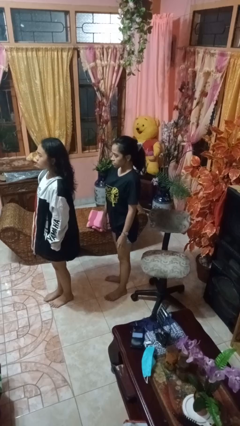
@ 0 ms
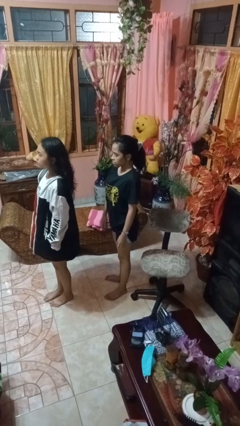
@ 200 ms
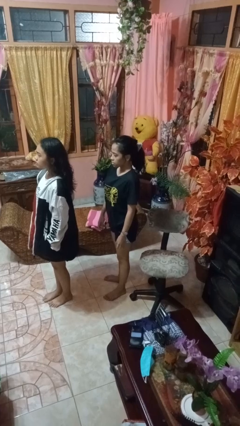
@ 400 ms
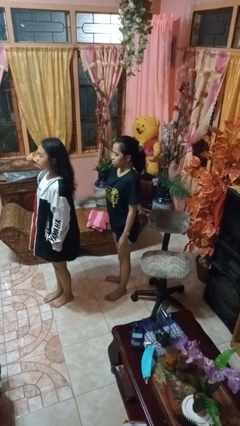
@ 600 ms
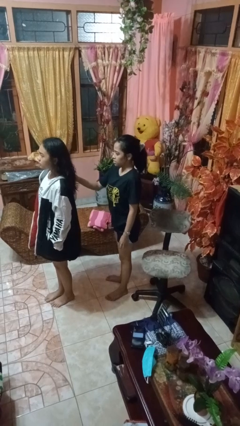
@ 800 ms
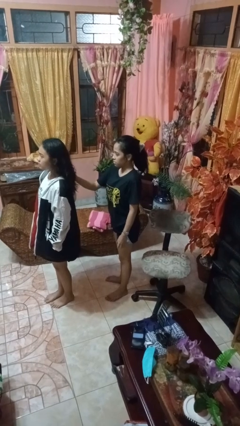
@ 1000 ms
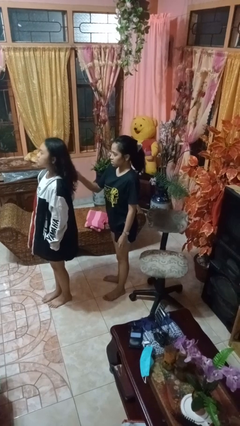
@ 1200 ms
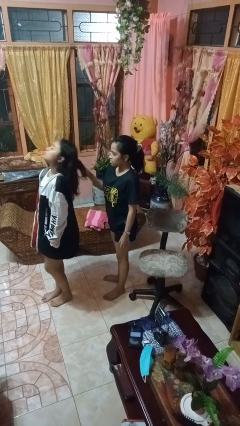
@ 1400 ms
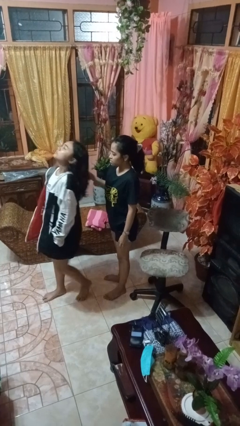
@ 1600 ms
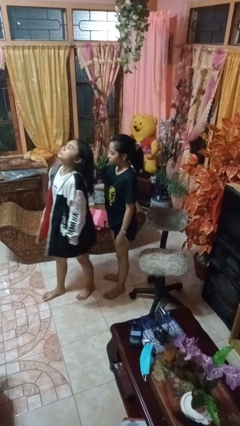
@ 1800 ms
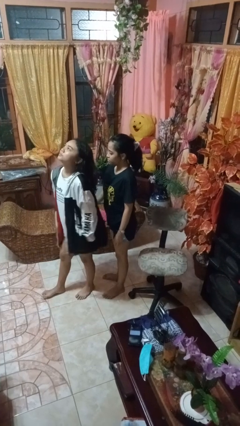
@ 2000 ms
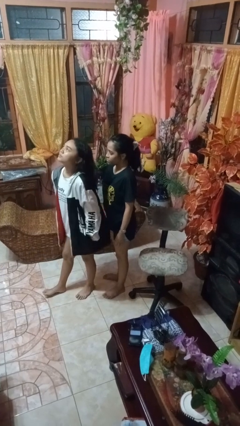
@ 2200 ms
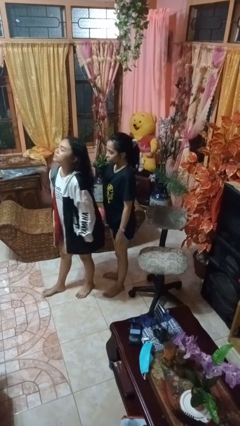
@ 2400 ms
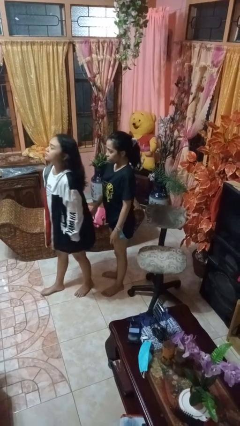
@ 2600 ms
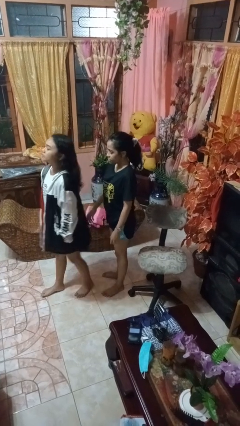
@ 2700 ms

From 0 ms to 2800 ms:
person grabs person by hair

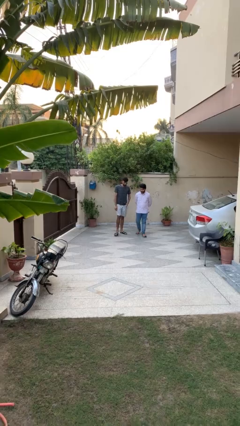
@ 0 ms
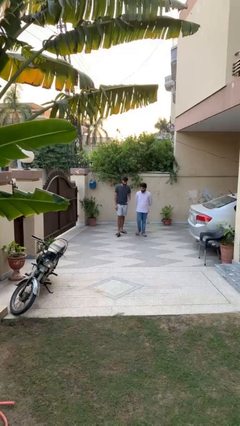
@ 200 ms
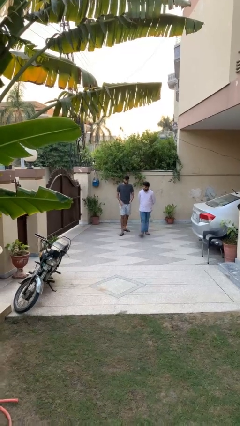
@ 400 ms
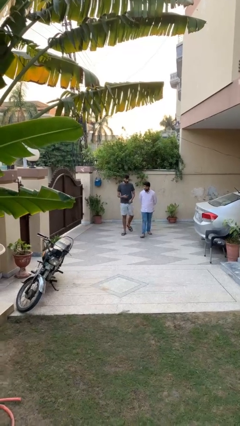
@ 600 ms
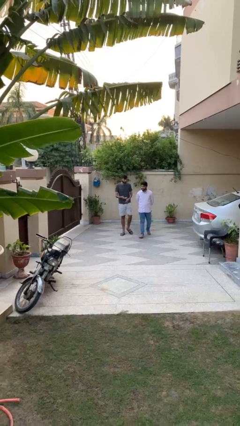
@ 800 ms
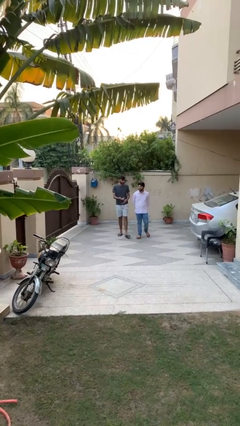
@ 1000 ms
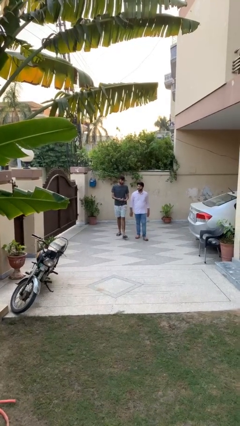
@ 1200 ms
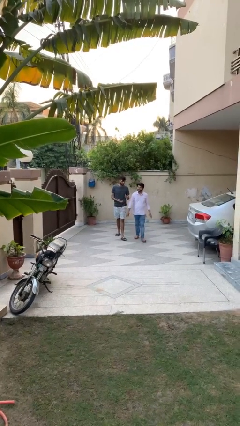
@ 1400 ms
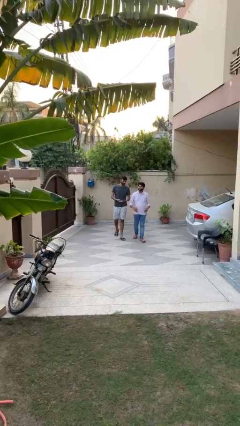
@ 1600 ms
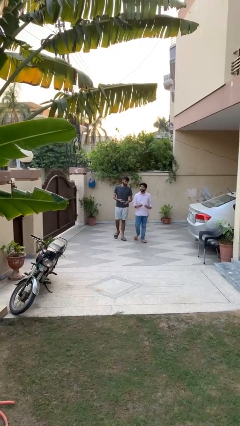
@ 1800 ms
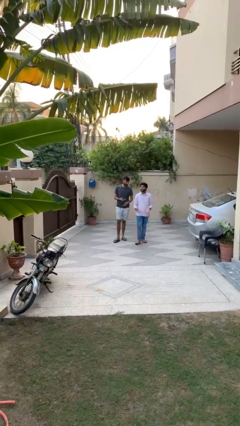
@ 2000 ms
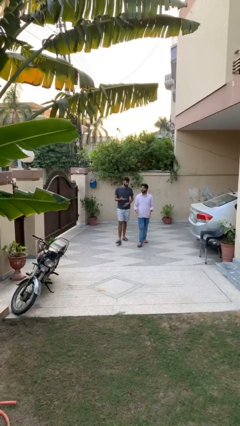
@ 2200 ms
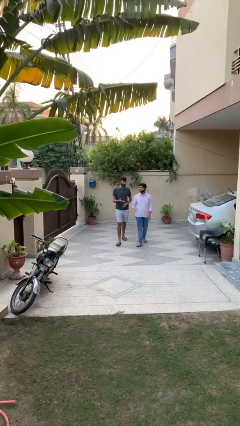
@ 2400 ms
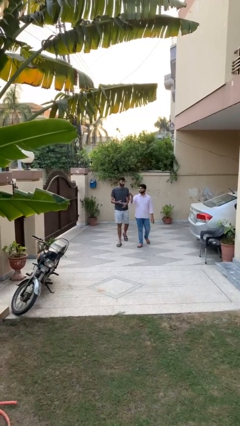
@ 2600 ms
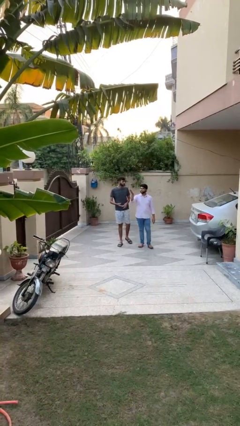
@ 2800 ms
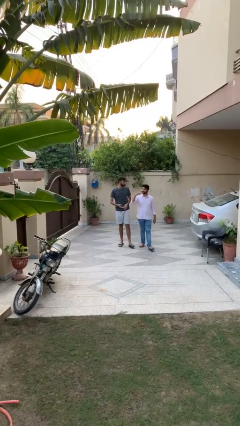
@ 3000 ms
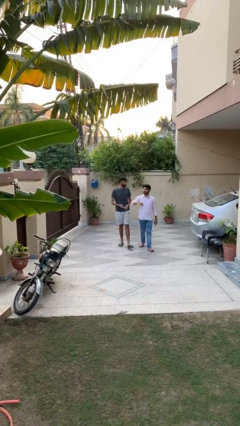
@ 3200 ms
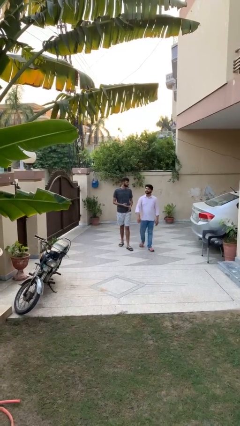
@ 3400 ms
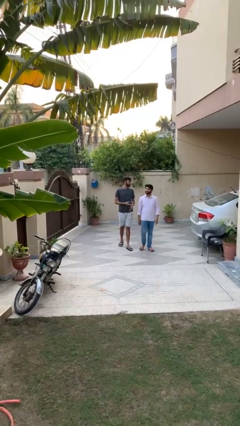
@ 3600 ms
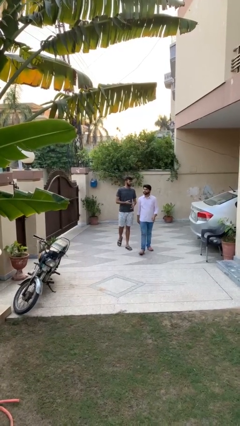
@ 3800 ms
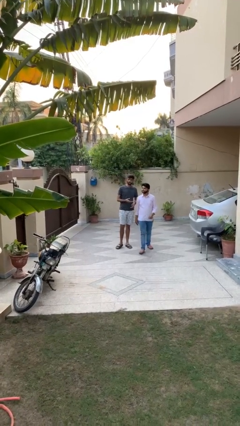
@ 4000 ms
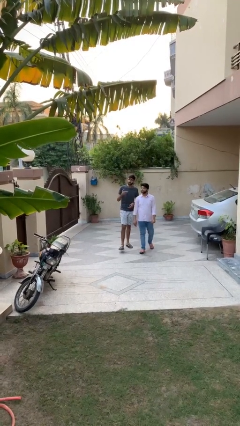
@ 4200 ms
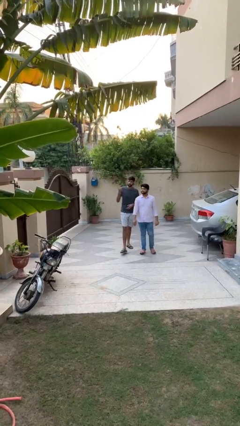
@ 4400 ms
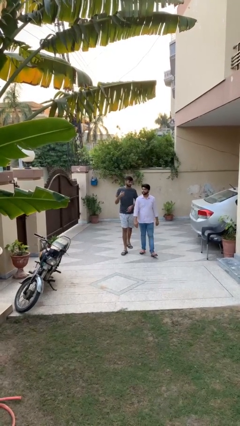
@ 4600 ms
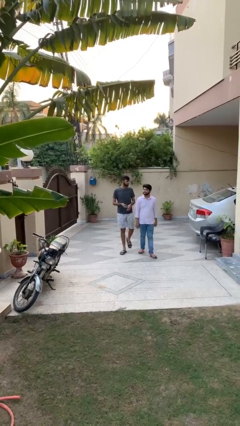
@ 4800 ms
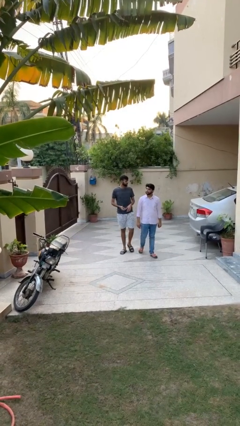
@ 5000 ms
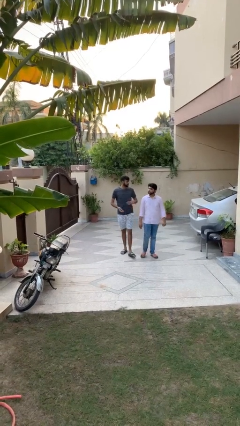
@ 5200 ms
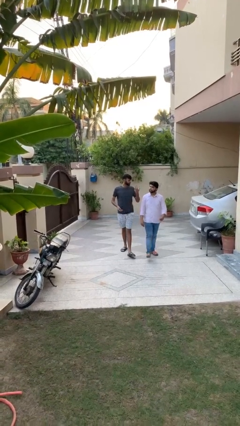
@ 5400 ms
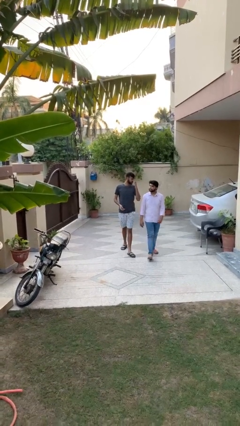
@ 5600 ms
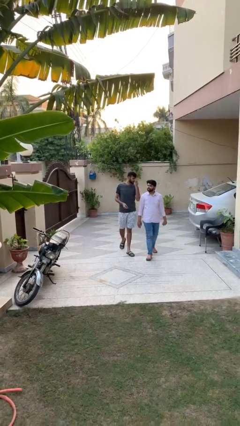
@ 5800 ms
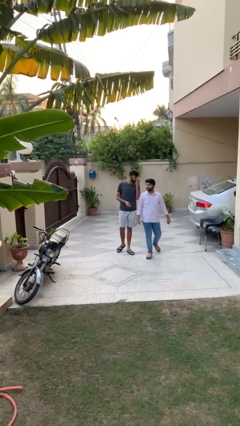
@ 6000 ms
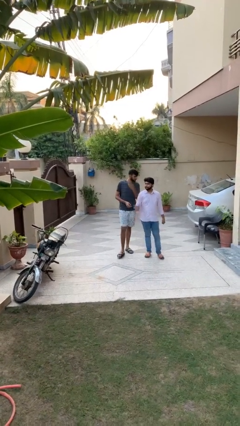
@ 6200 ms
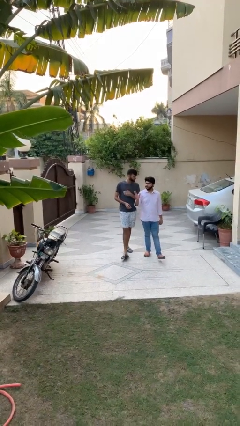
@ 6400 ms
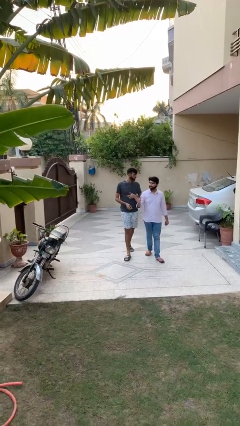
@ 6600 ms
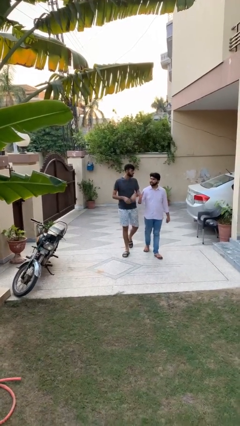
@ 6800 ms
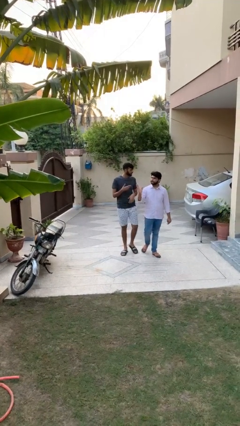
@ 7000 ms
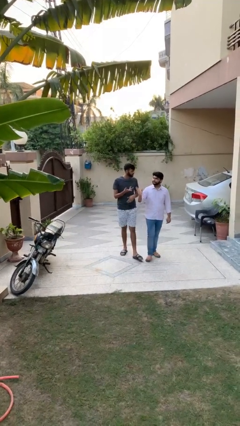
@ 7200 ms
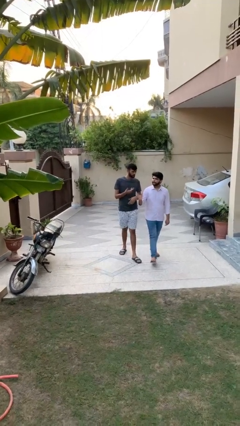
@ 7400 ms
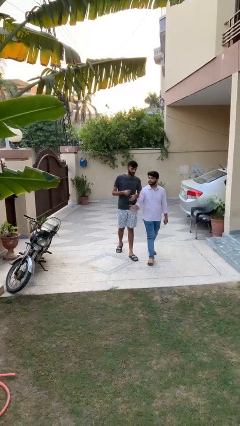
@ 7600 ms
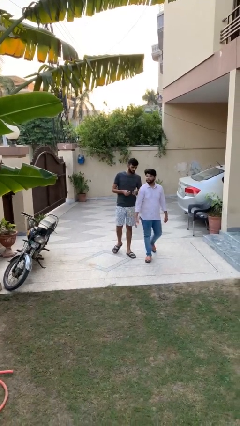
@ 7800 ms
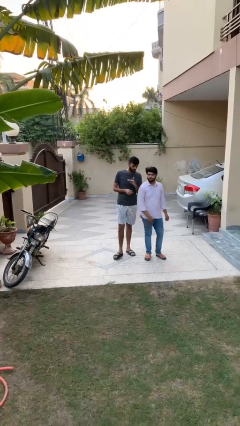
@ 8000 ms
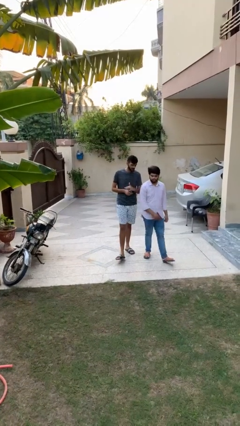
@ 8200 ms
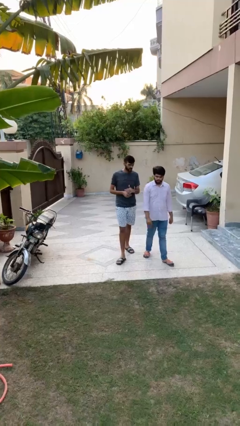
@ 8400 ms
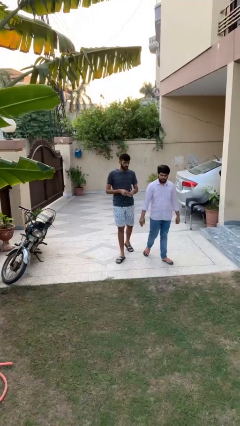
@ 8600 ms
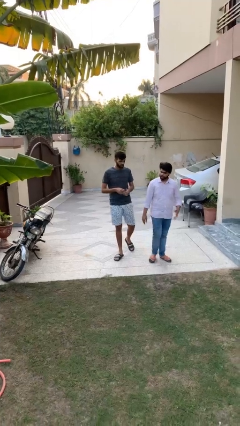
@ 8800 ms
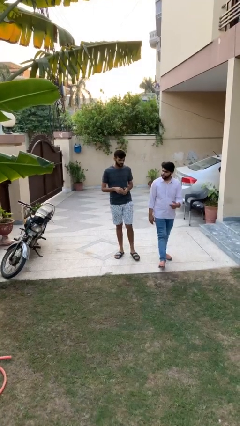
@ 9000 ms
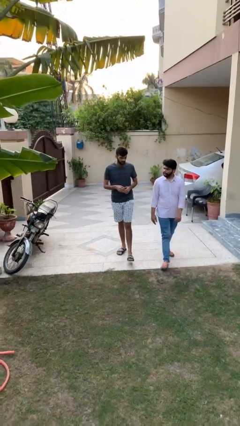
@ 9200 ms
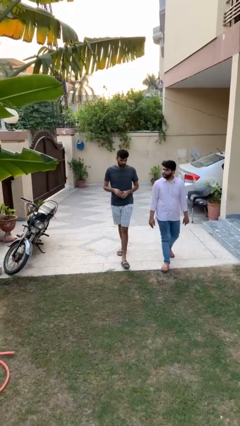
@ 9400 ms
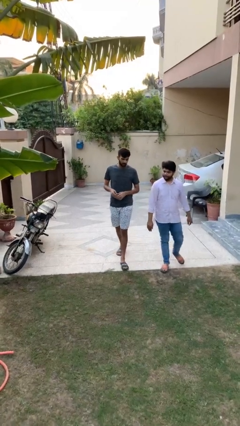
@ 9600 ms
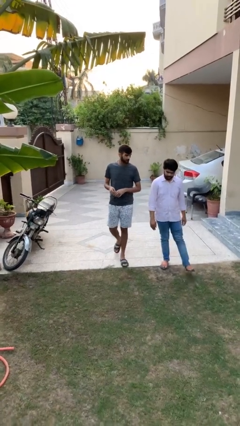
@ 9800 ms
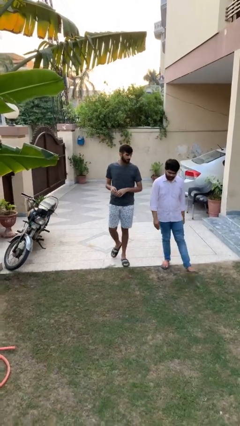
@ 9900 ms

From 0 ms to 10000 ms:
person talks to person

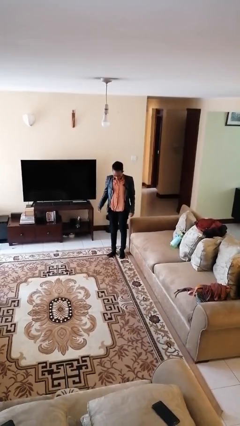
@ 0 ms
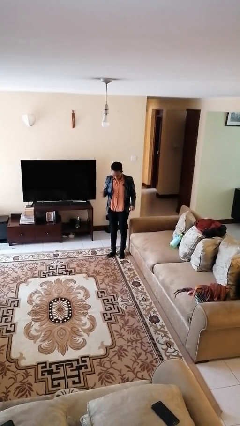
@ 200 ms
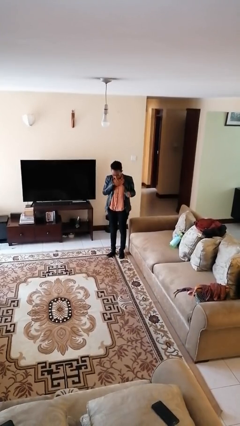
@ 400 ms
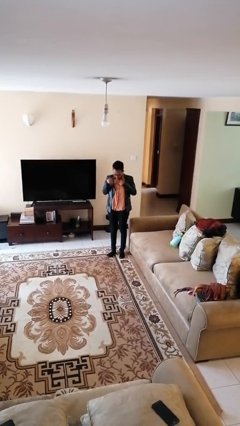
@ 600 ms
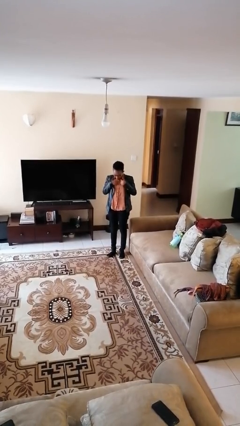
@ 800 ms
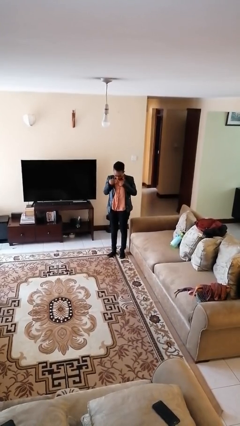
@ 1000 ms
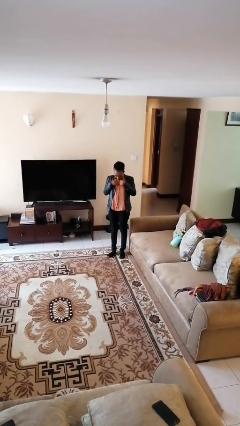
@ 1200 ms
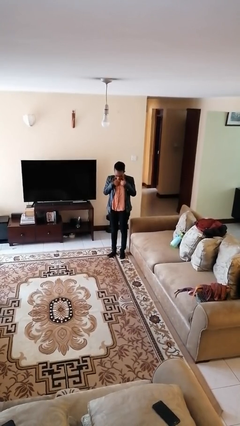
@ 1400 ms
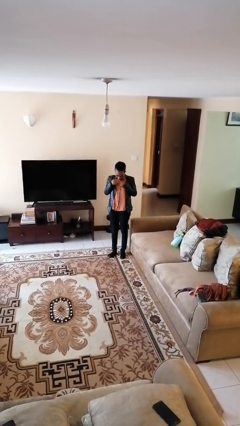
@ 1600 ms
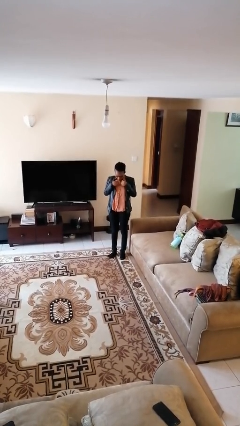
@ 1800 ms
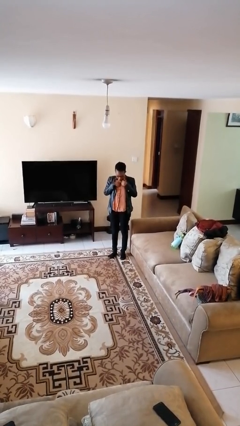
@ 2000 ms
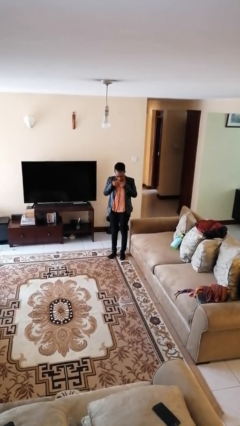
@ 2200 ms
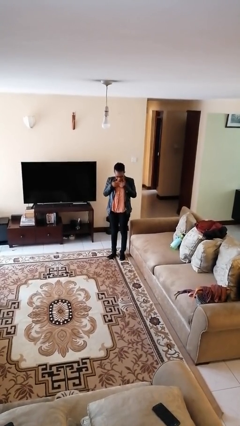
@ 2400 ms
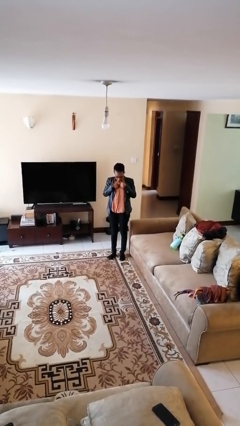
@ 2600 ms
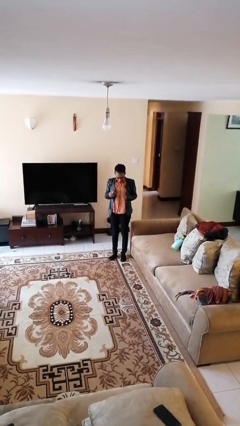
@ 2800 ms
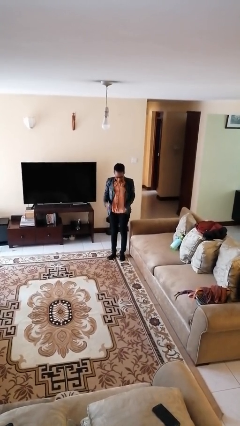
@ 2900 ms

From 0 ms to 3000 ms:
person drums on chest

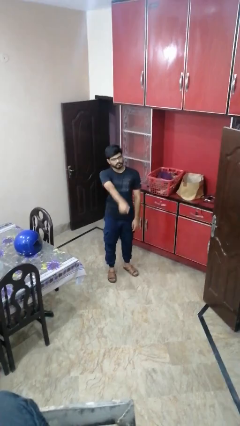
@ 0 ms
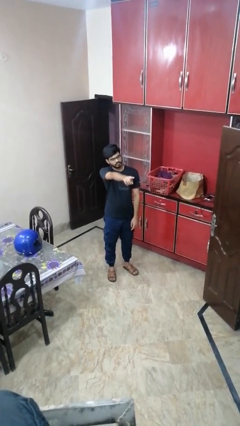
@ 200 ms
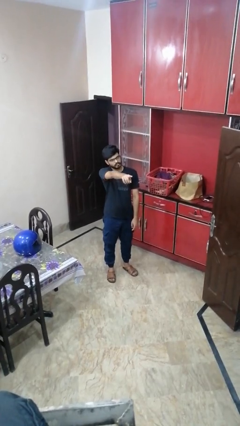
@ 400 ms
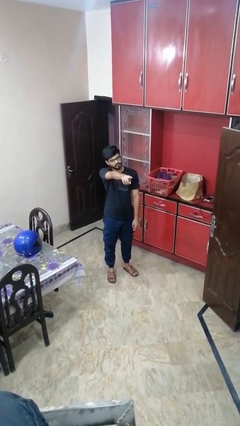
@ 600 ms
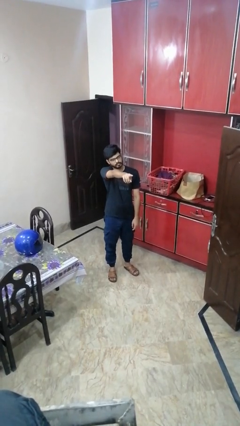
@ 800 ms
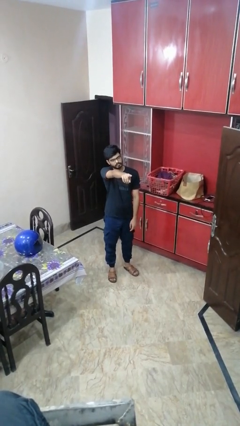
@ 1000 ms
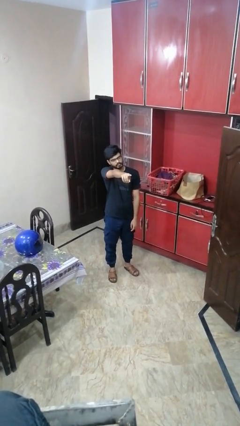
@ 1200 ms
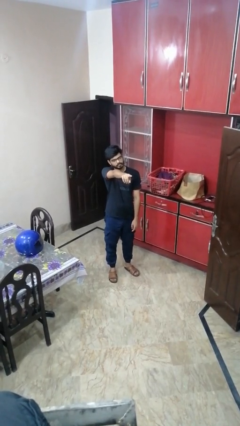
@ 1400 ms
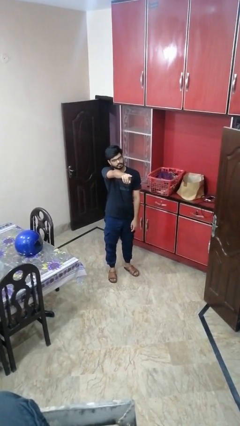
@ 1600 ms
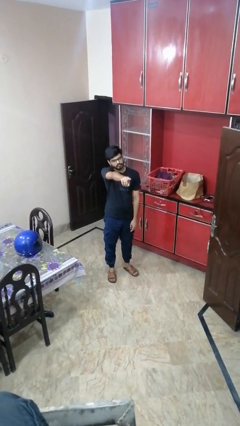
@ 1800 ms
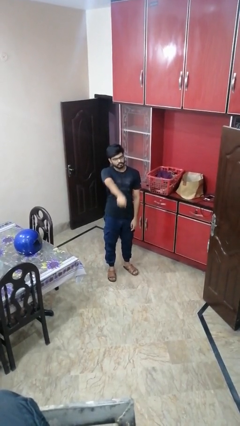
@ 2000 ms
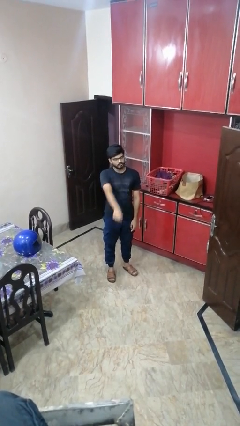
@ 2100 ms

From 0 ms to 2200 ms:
person points at person
